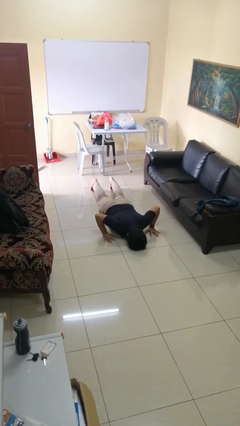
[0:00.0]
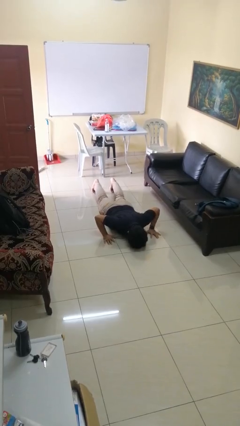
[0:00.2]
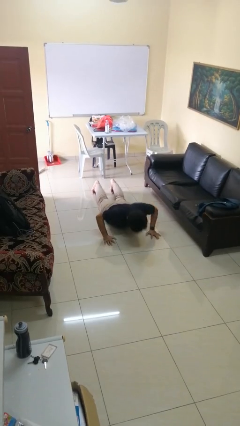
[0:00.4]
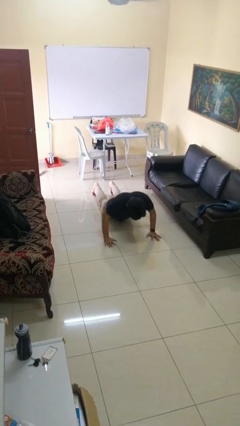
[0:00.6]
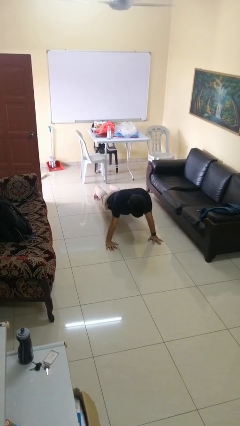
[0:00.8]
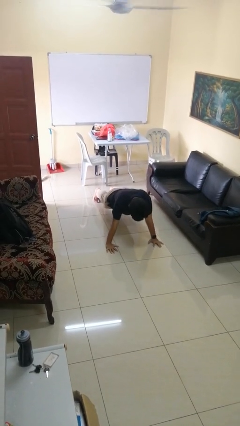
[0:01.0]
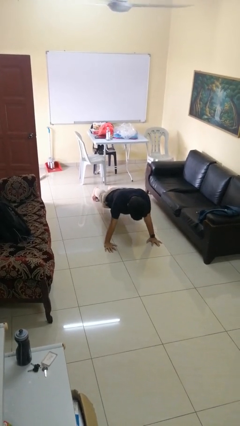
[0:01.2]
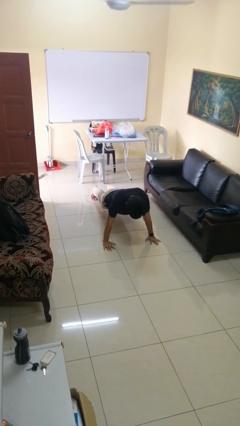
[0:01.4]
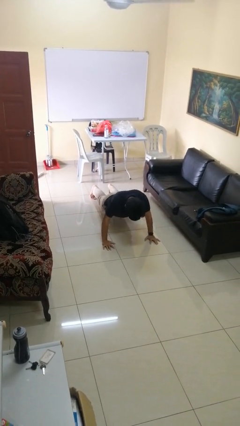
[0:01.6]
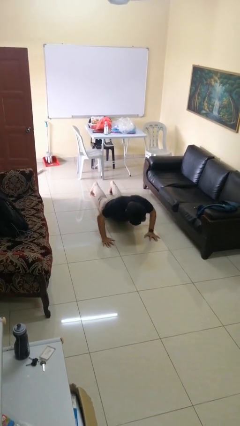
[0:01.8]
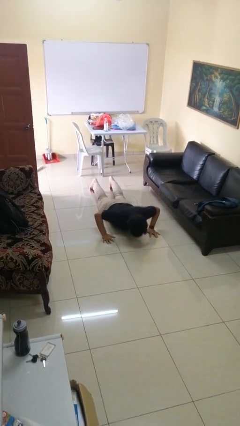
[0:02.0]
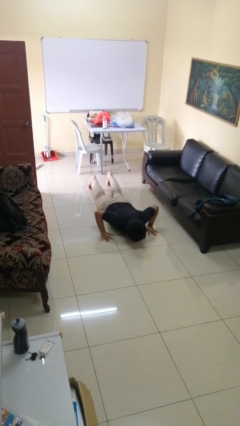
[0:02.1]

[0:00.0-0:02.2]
person exercises with pushup

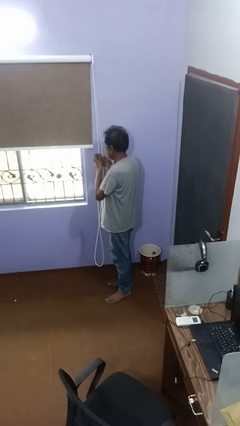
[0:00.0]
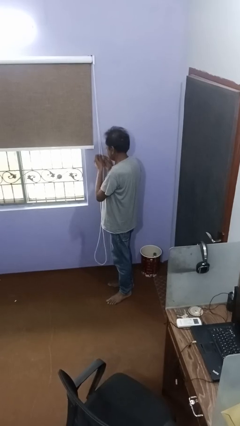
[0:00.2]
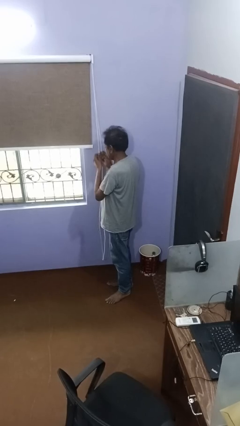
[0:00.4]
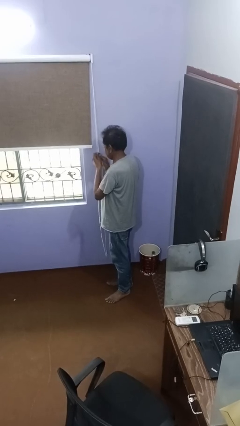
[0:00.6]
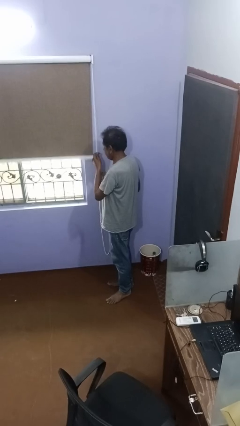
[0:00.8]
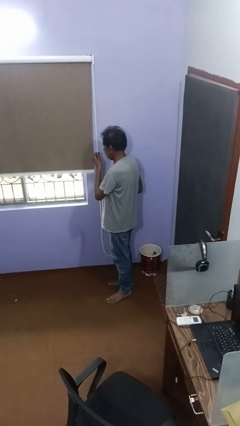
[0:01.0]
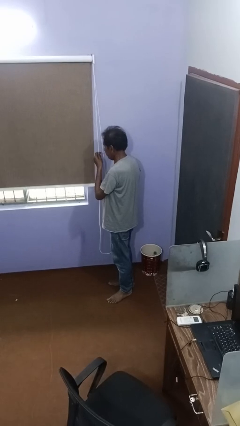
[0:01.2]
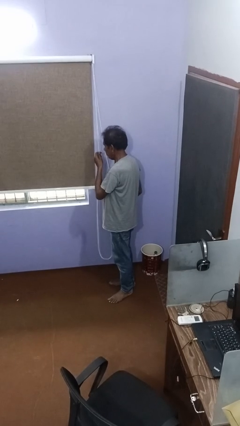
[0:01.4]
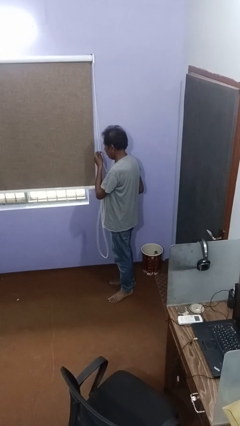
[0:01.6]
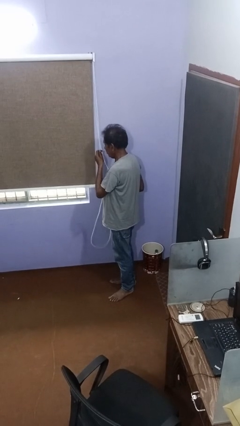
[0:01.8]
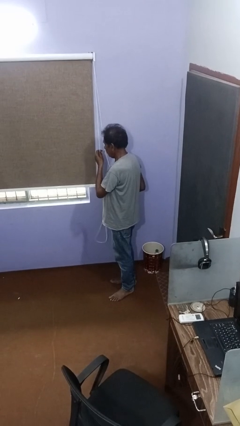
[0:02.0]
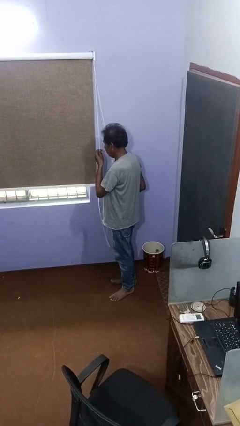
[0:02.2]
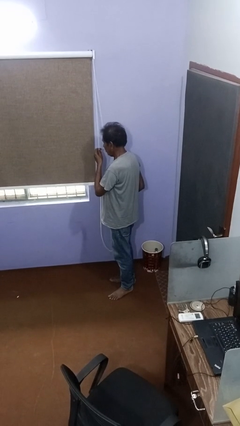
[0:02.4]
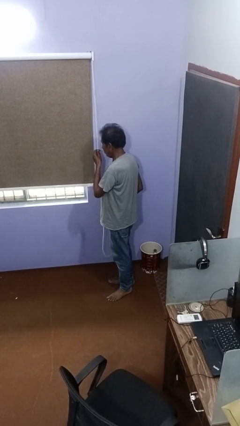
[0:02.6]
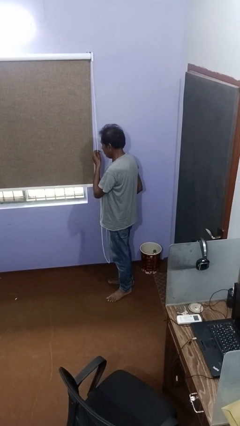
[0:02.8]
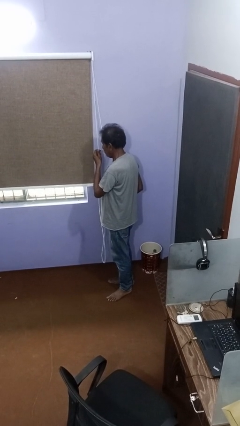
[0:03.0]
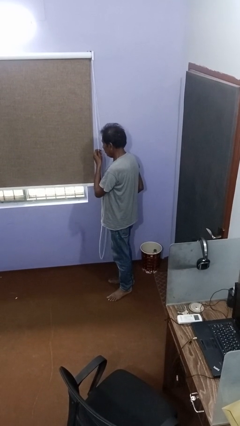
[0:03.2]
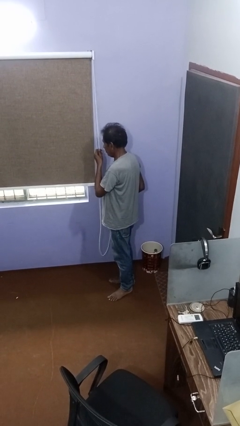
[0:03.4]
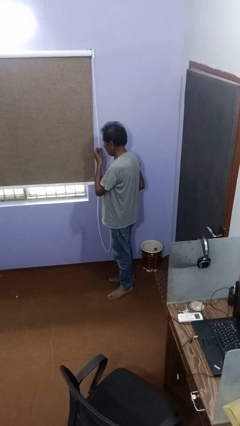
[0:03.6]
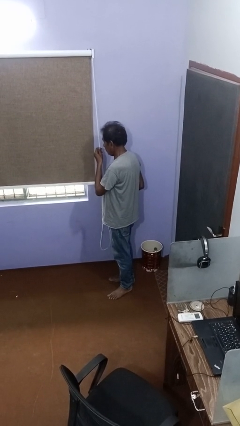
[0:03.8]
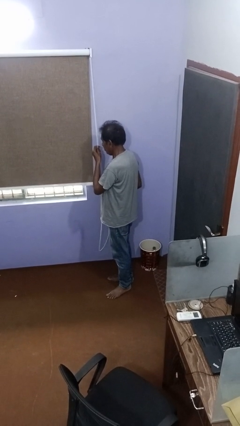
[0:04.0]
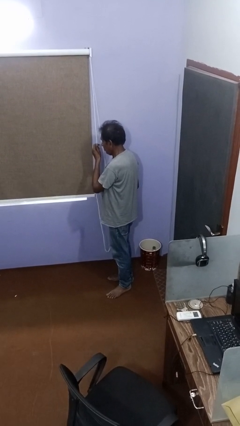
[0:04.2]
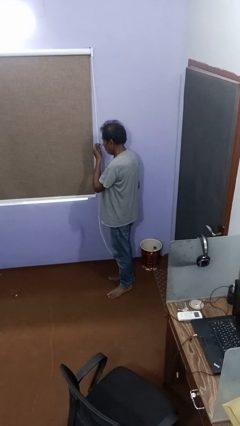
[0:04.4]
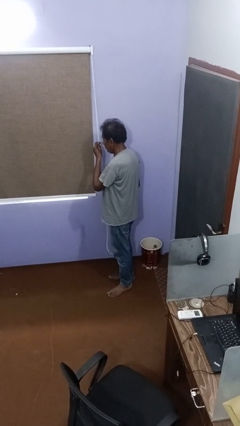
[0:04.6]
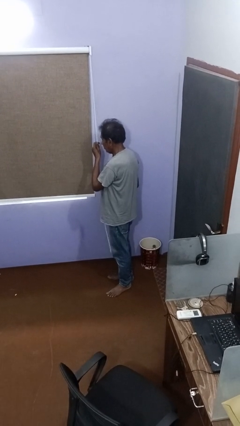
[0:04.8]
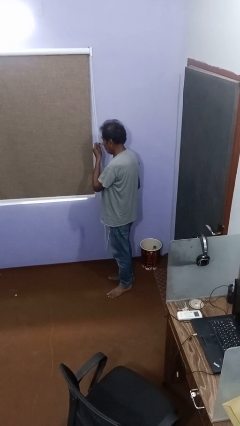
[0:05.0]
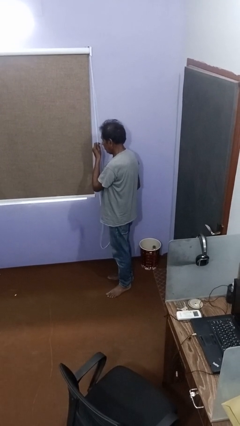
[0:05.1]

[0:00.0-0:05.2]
person closes curtains

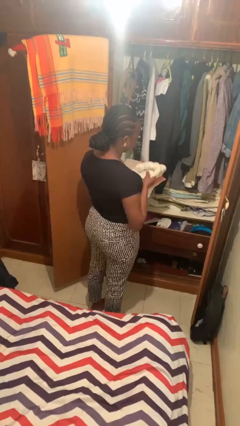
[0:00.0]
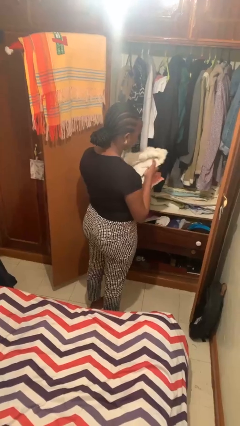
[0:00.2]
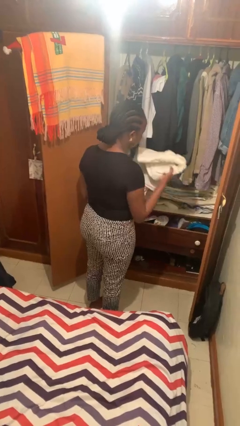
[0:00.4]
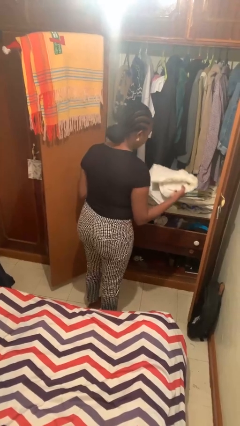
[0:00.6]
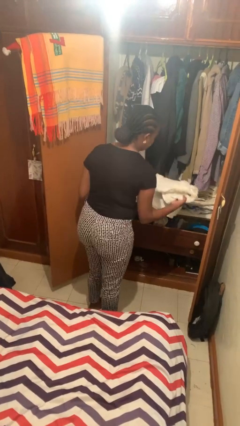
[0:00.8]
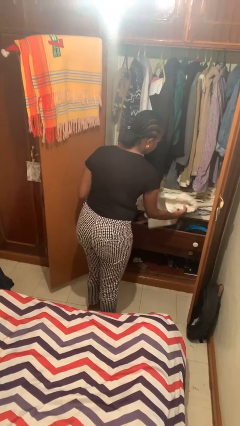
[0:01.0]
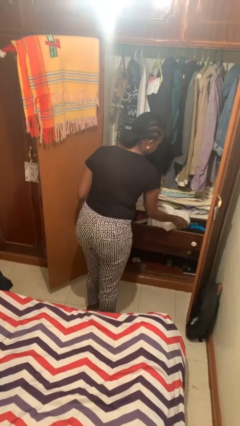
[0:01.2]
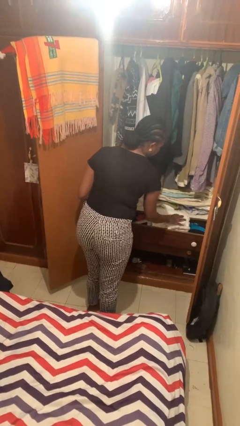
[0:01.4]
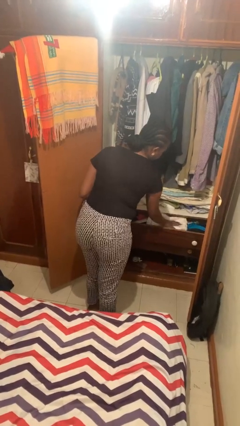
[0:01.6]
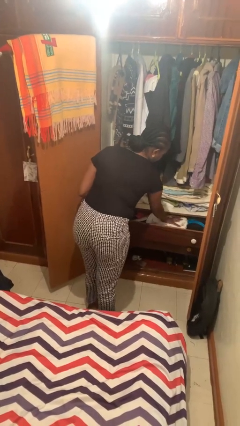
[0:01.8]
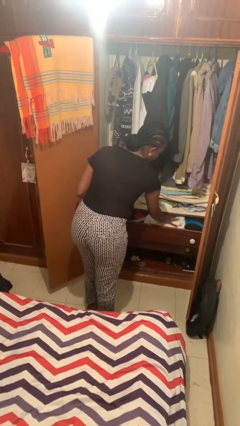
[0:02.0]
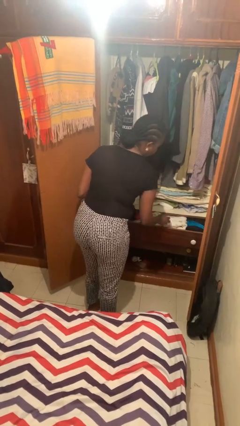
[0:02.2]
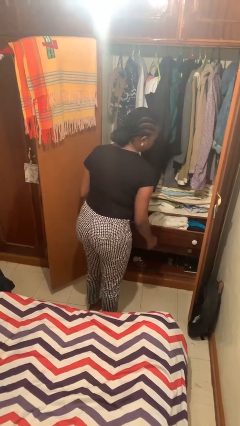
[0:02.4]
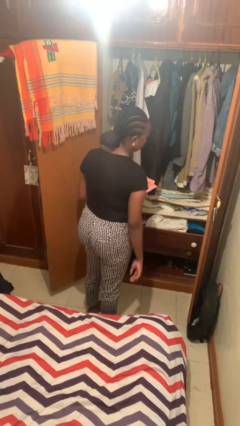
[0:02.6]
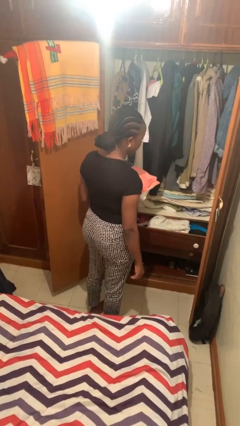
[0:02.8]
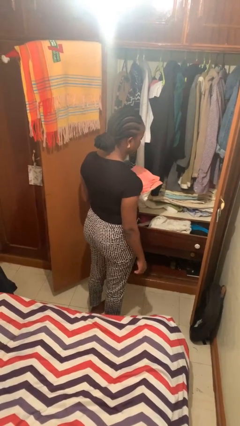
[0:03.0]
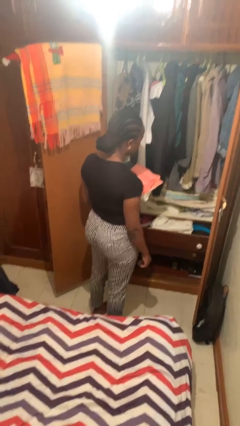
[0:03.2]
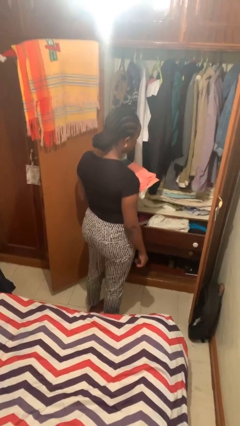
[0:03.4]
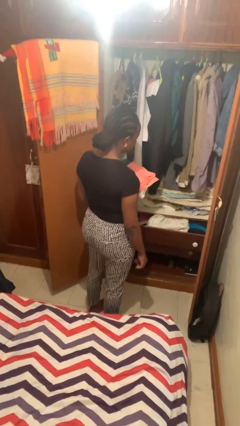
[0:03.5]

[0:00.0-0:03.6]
person puts clothes into dresser

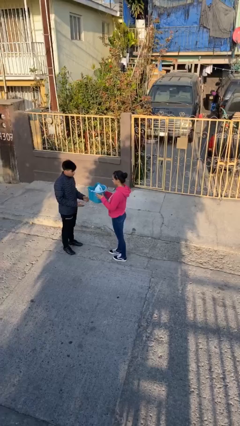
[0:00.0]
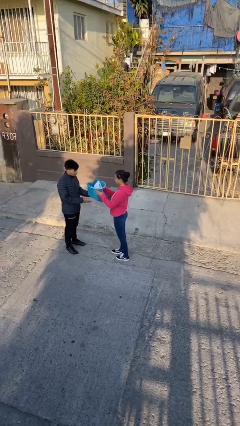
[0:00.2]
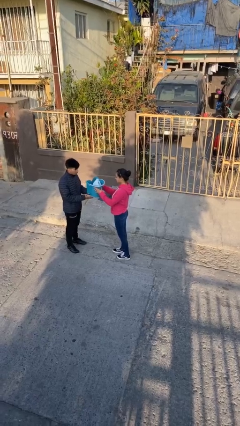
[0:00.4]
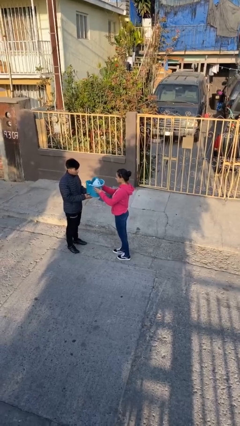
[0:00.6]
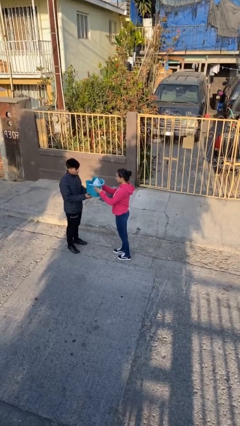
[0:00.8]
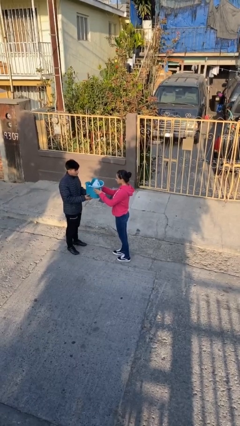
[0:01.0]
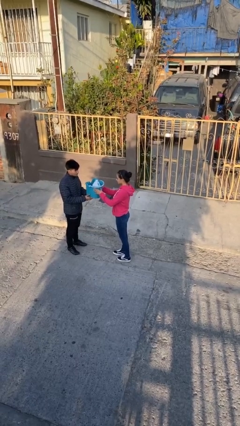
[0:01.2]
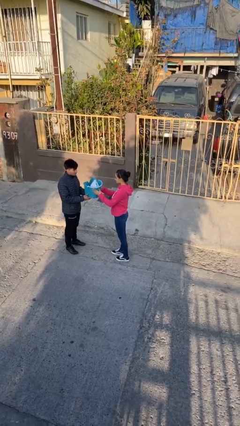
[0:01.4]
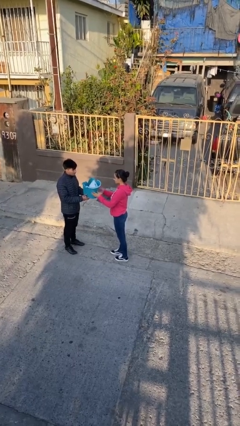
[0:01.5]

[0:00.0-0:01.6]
person transfers object to person

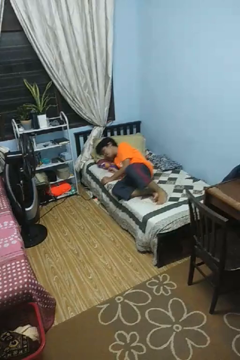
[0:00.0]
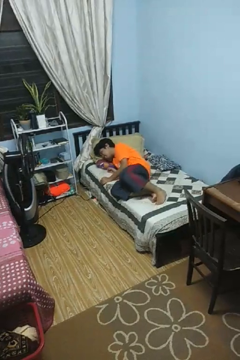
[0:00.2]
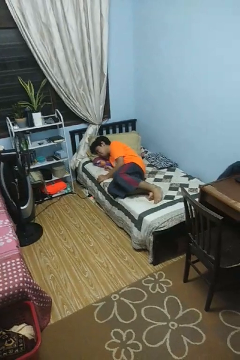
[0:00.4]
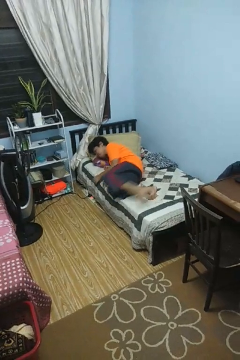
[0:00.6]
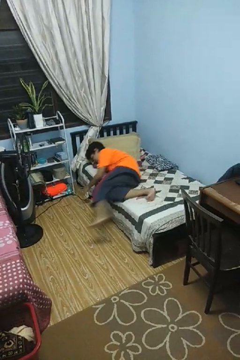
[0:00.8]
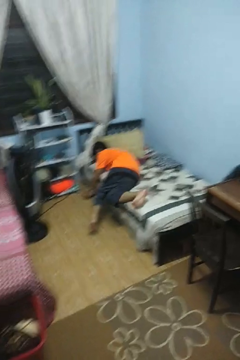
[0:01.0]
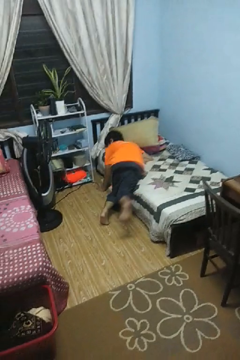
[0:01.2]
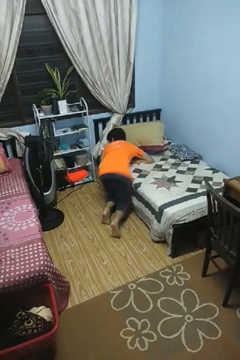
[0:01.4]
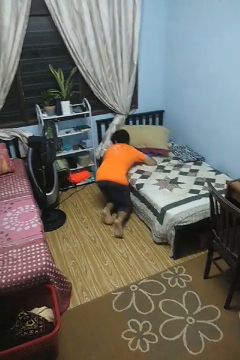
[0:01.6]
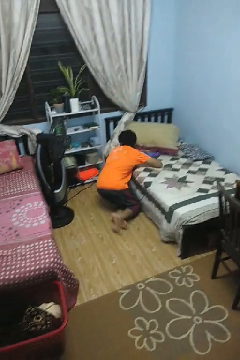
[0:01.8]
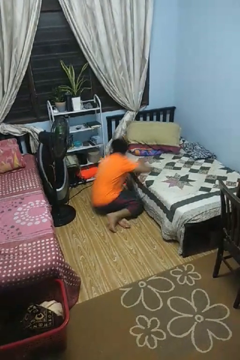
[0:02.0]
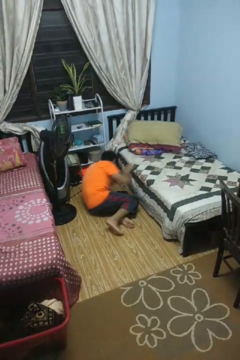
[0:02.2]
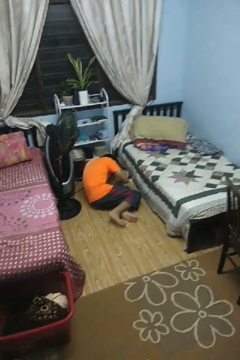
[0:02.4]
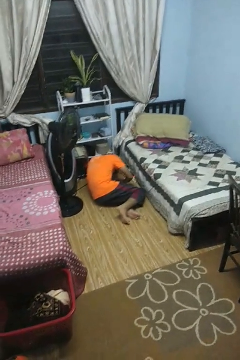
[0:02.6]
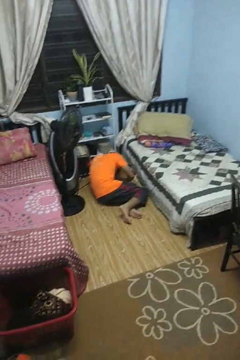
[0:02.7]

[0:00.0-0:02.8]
person falls from bed

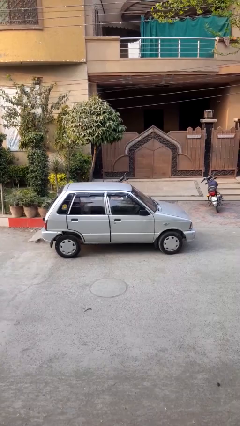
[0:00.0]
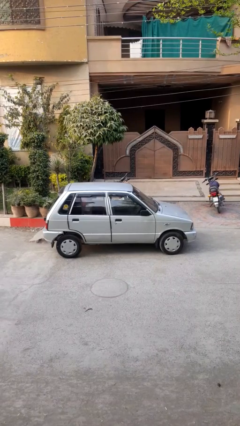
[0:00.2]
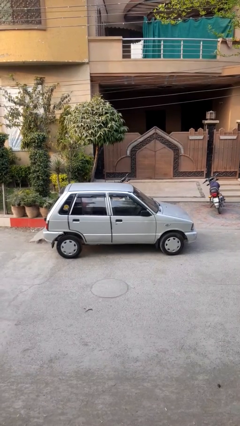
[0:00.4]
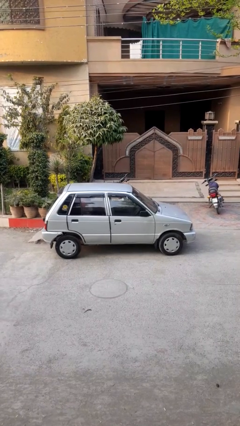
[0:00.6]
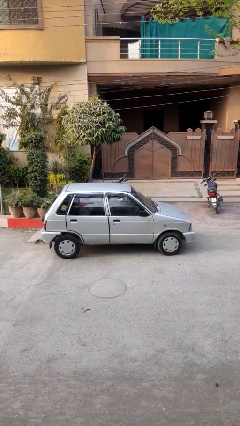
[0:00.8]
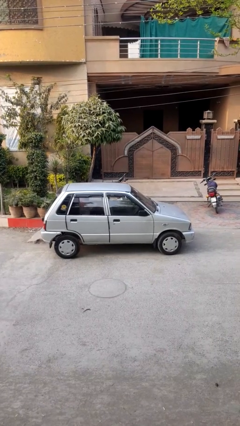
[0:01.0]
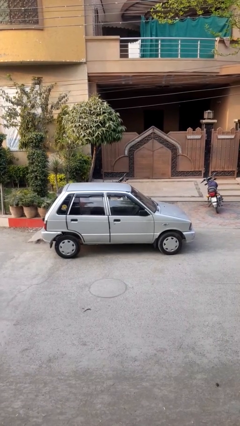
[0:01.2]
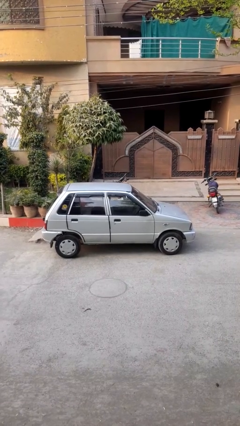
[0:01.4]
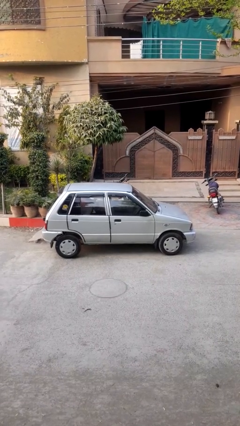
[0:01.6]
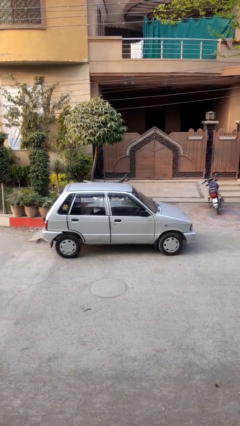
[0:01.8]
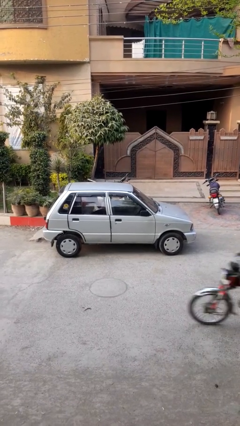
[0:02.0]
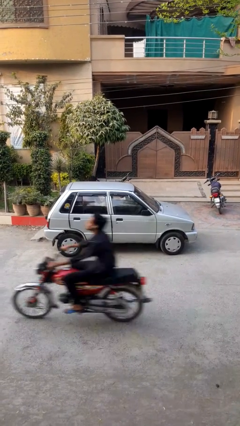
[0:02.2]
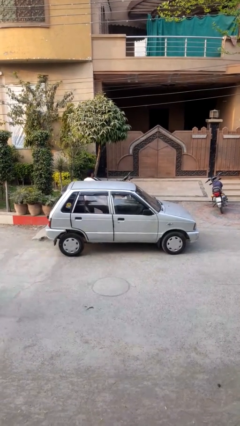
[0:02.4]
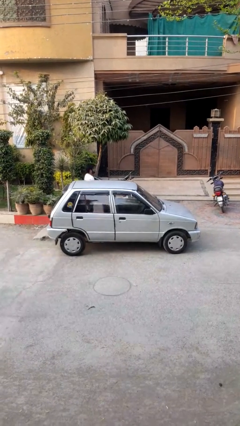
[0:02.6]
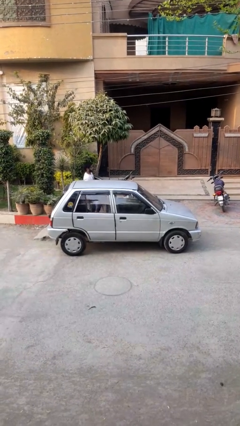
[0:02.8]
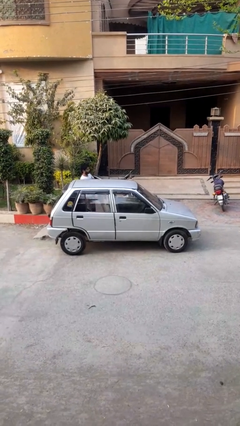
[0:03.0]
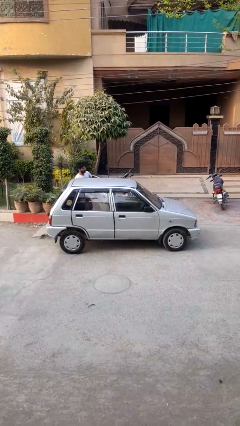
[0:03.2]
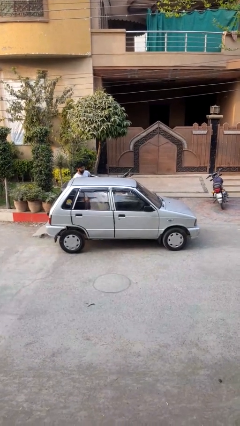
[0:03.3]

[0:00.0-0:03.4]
car drops off person
